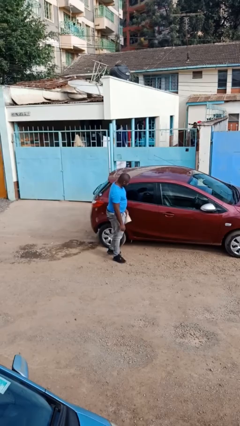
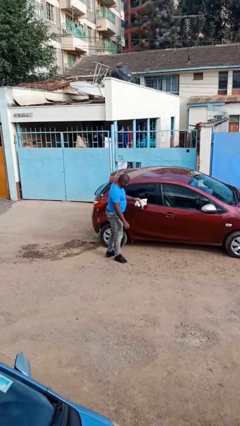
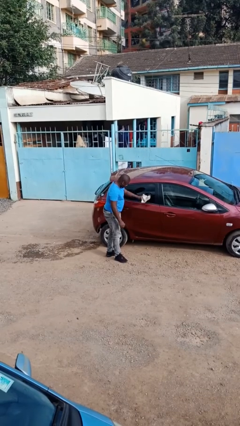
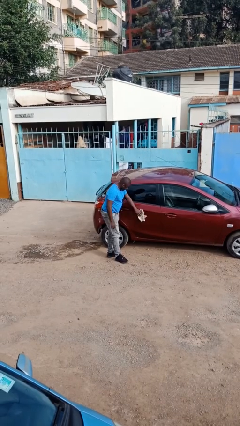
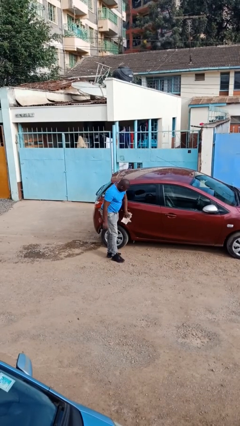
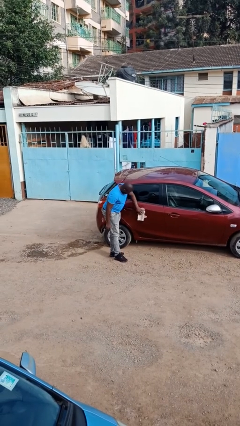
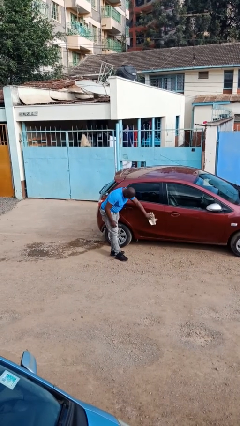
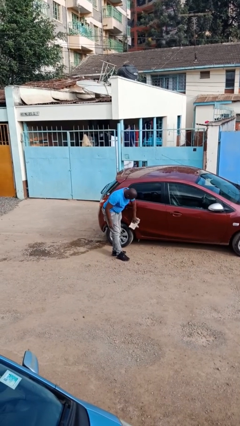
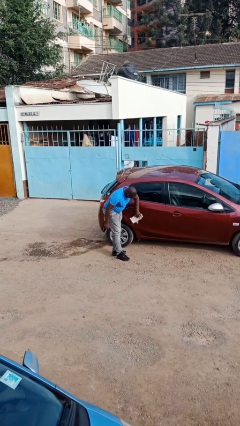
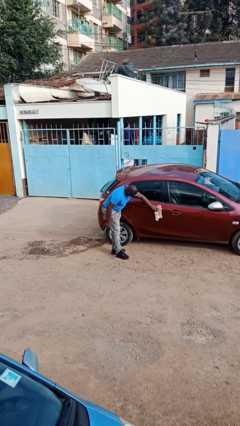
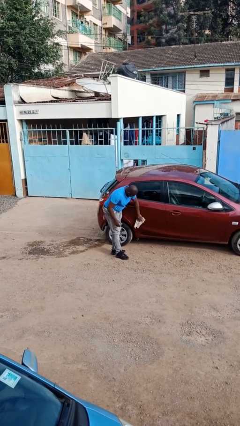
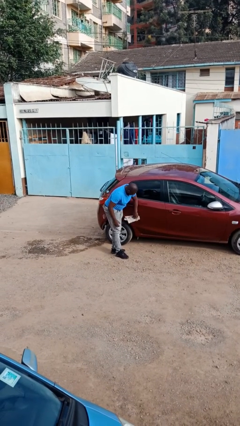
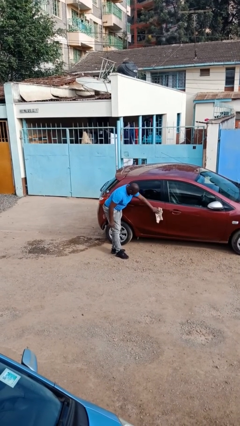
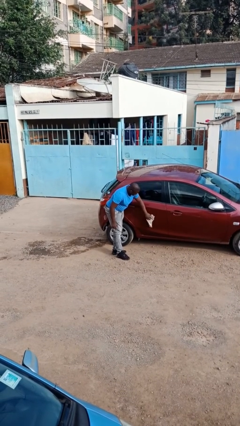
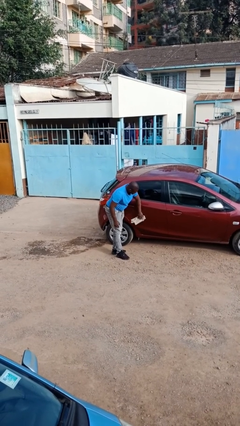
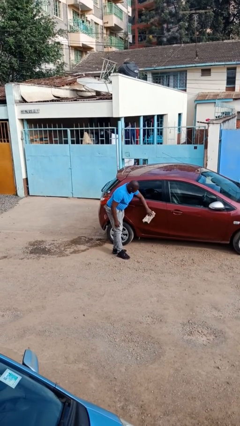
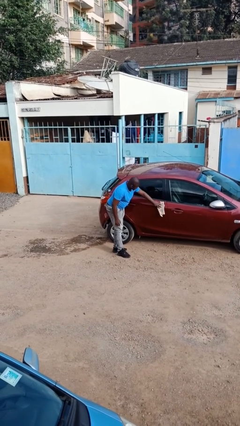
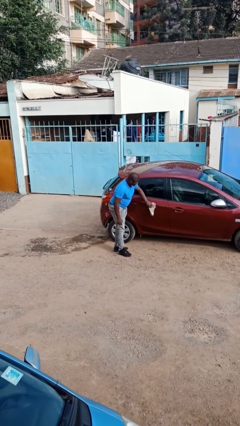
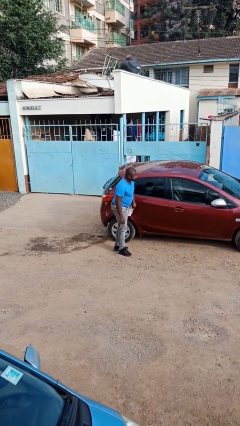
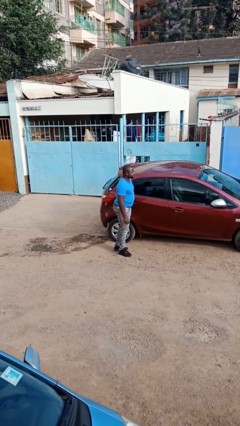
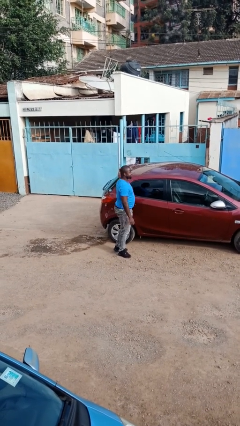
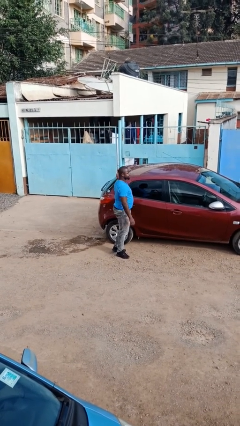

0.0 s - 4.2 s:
person polishes car with rag

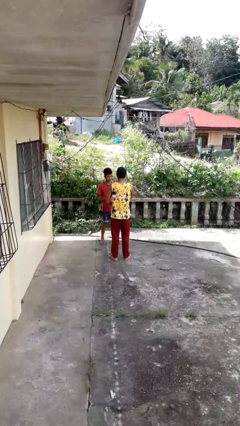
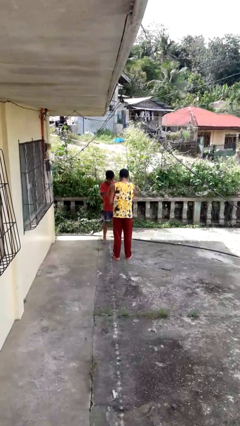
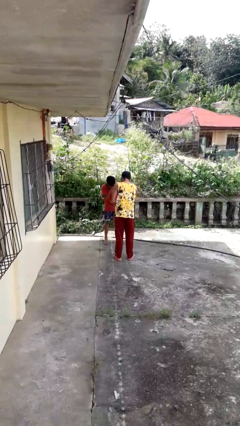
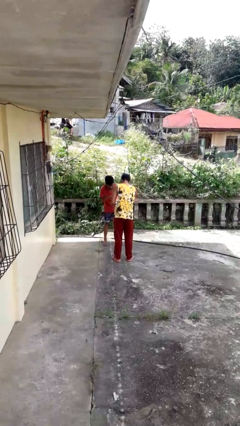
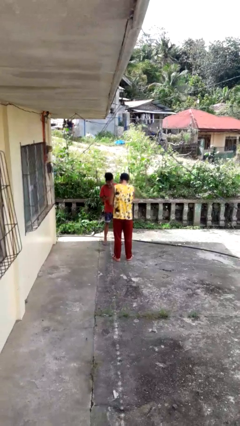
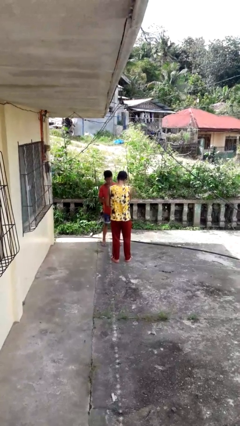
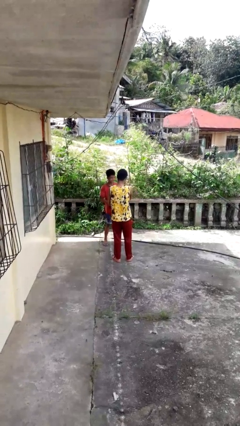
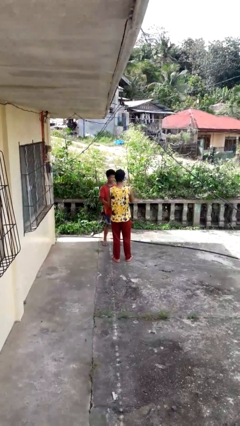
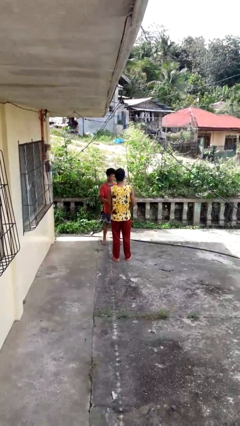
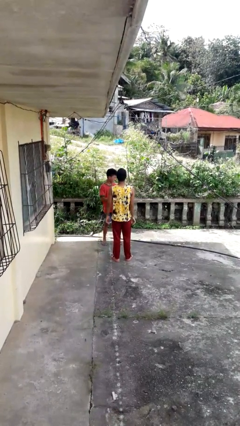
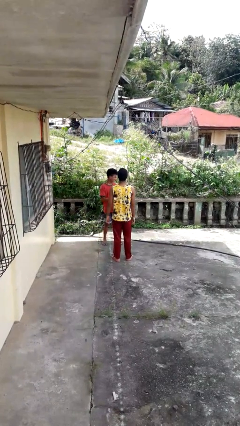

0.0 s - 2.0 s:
person laughs with person

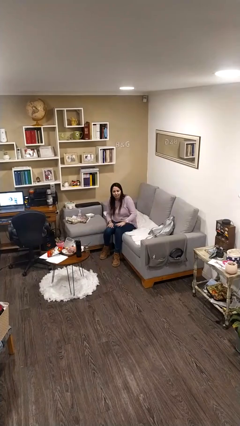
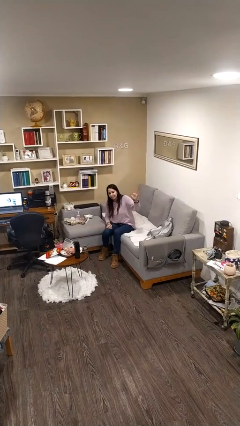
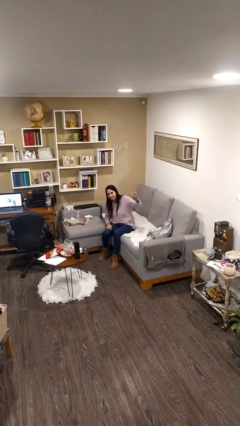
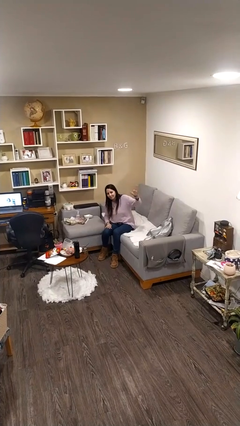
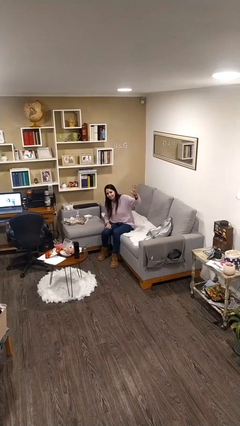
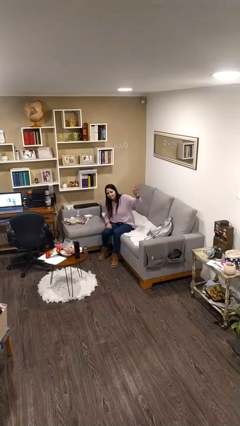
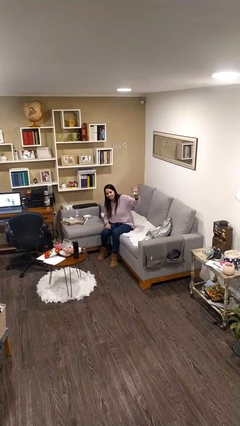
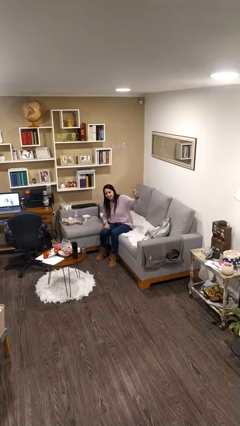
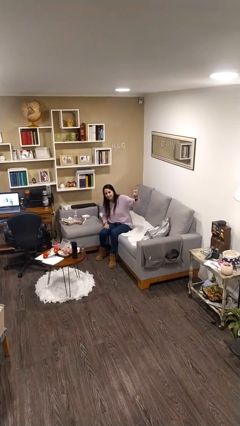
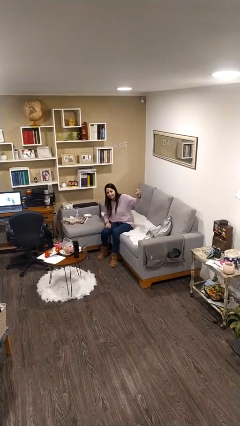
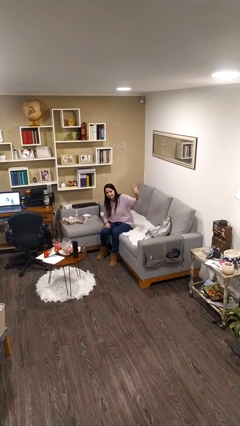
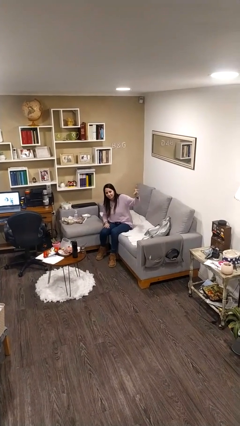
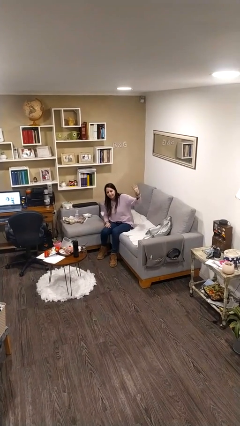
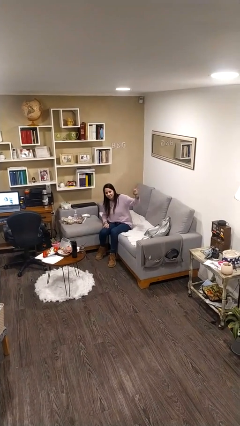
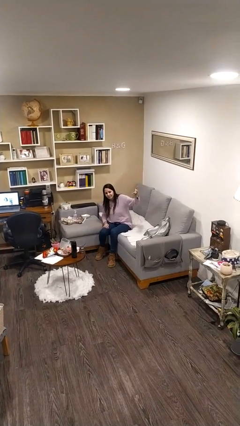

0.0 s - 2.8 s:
person waves at person

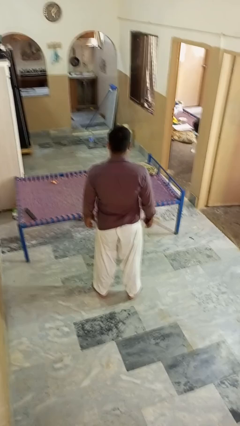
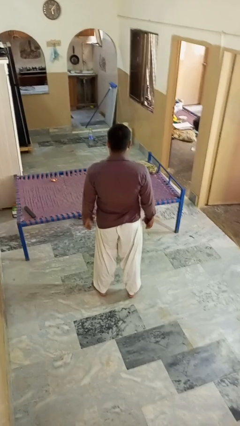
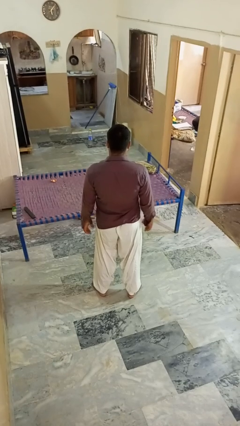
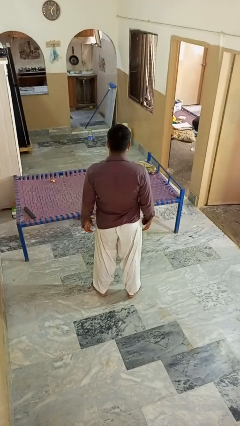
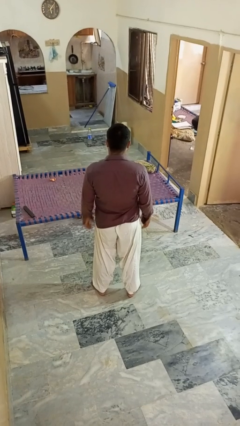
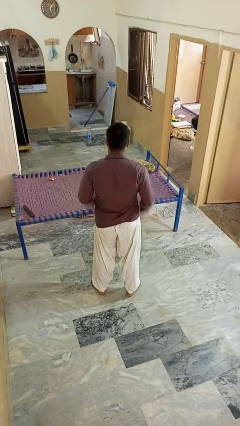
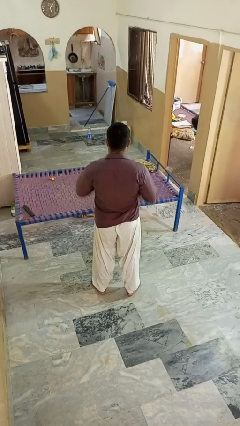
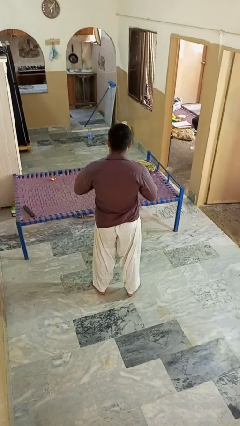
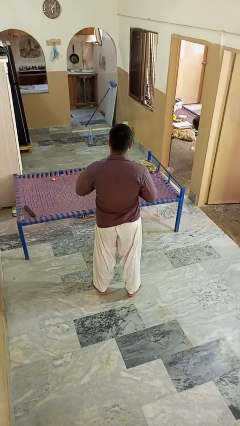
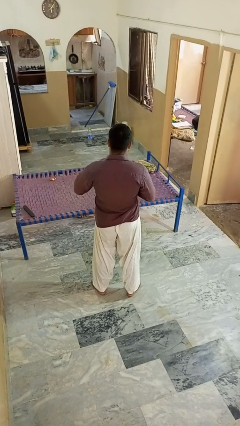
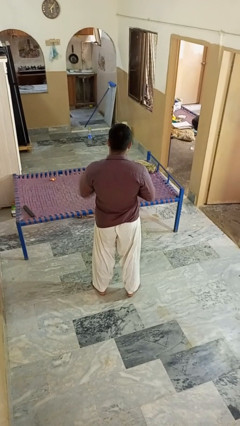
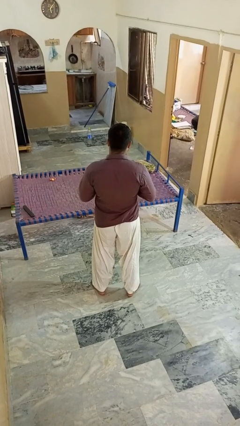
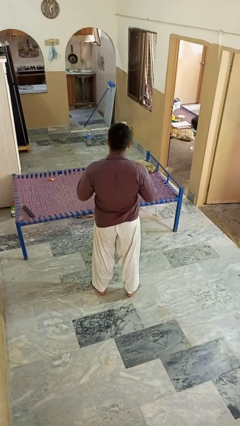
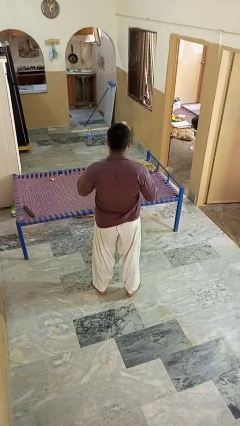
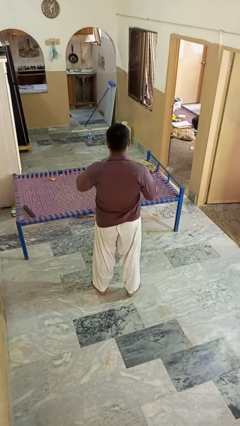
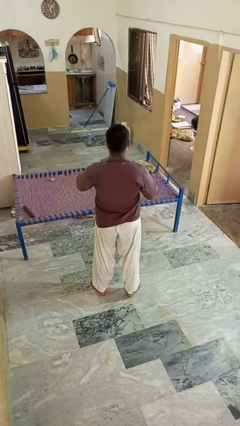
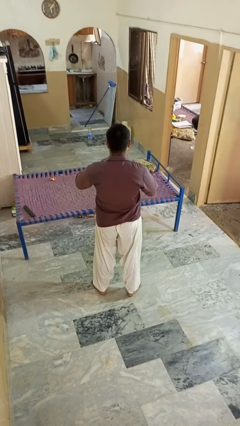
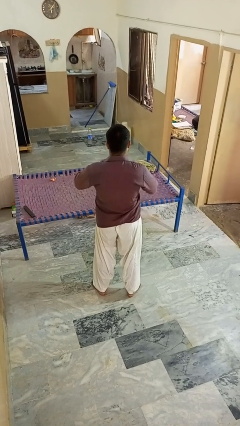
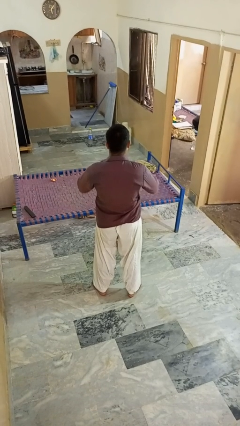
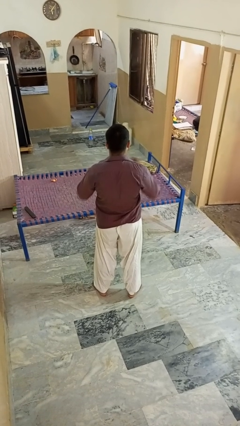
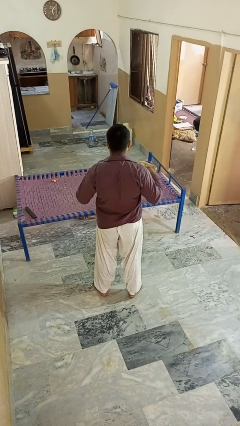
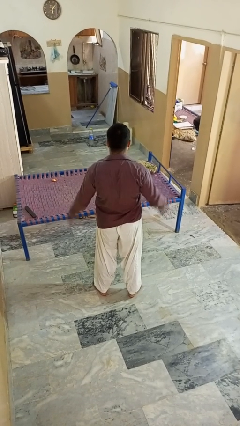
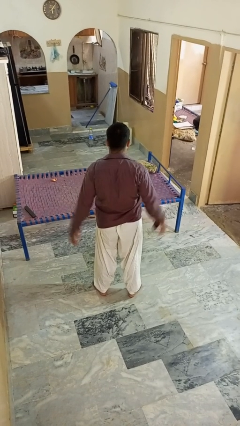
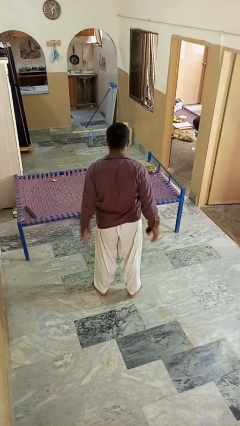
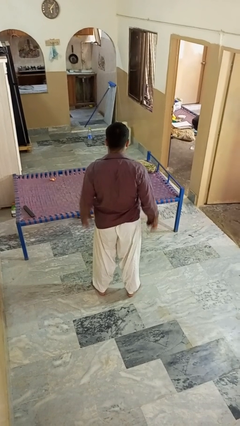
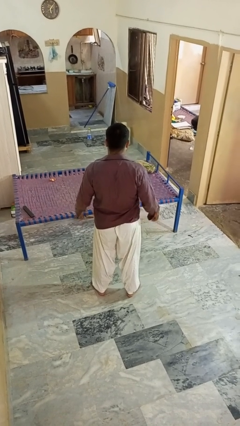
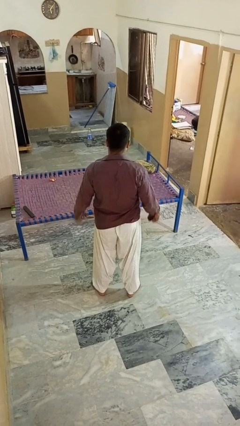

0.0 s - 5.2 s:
person unbuttons shirt

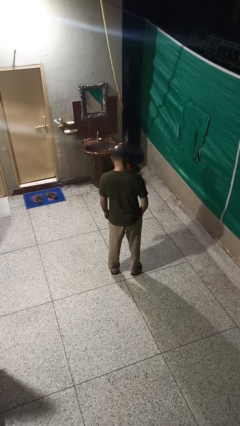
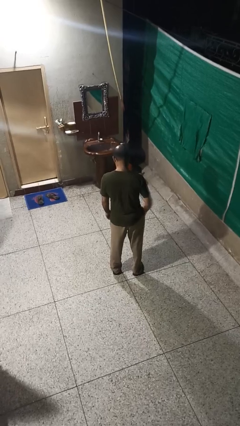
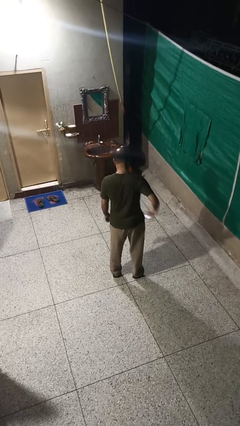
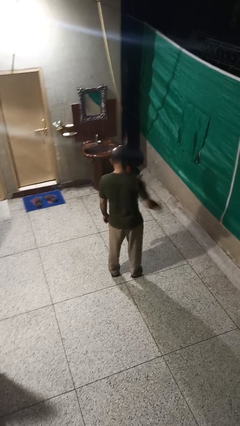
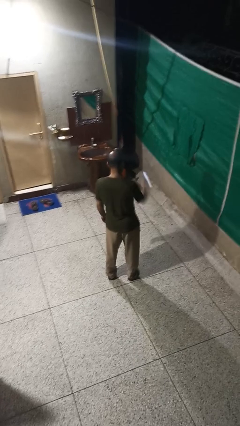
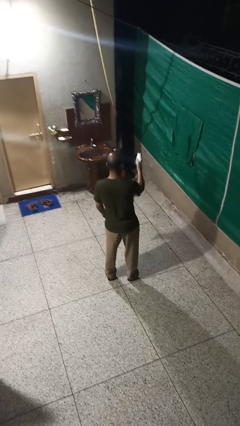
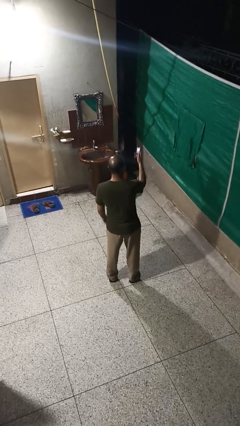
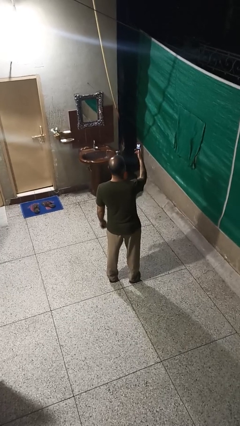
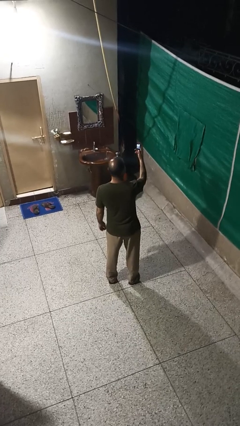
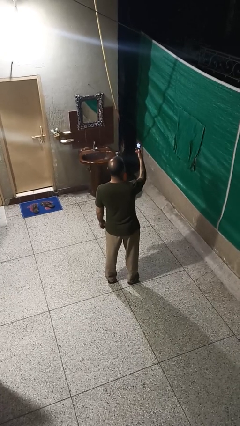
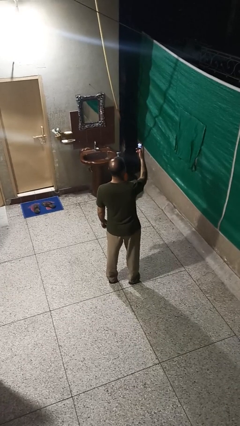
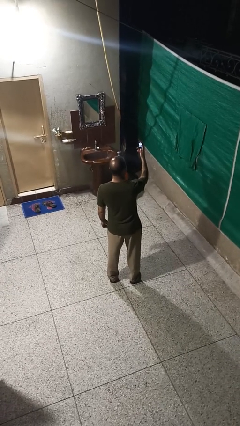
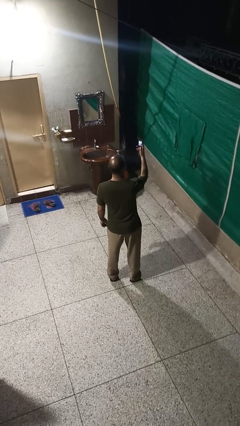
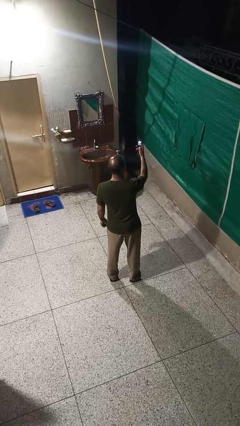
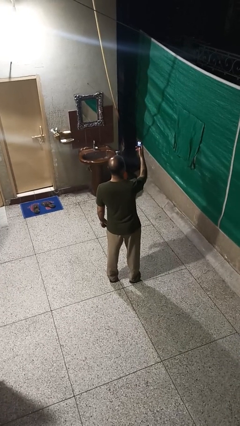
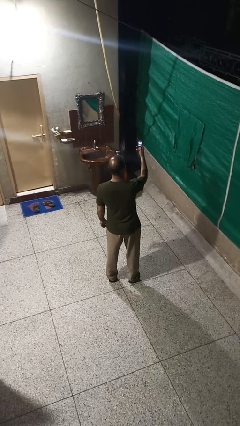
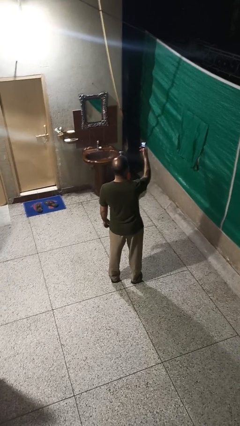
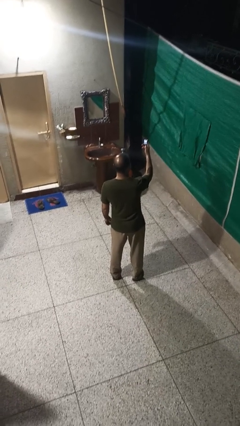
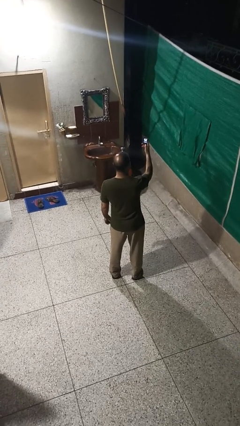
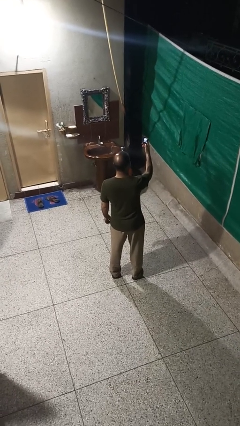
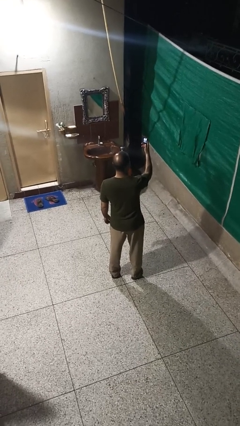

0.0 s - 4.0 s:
person takes phone from pocket
